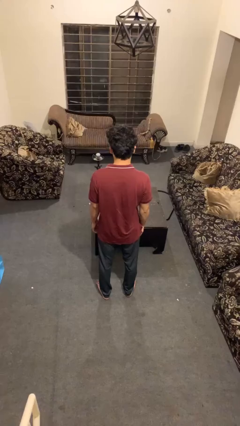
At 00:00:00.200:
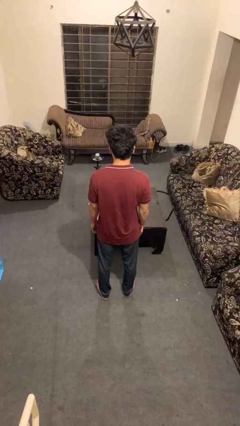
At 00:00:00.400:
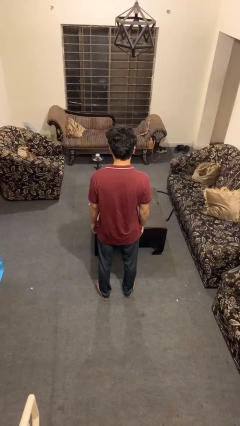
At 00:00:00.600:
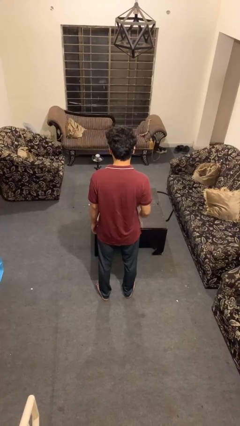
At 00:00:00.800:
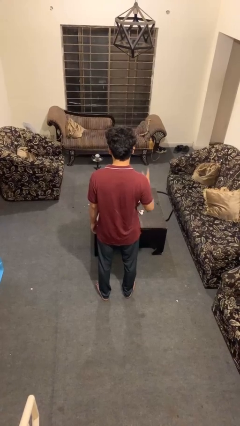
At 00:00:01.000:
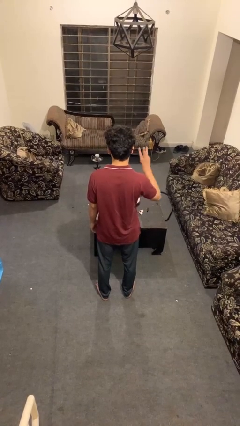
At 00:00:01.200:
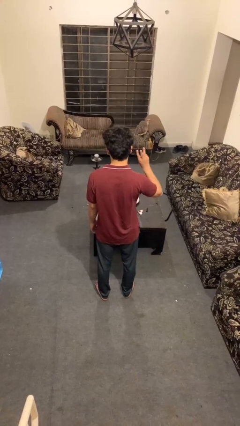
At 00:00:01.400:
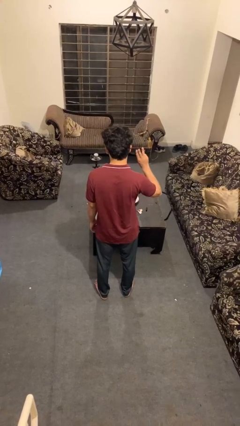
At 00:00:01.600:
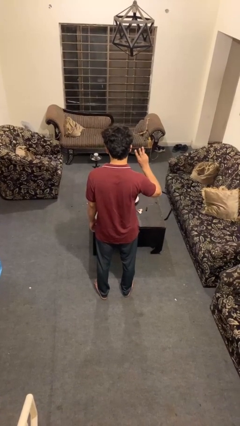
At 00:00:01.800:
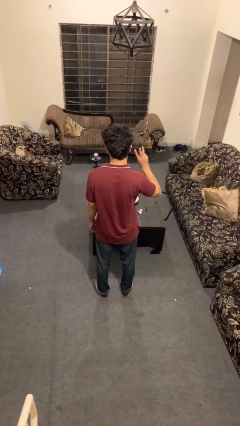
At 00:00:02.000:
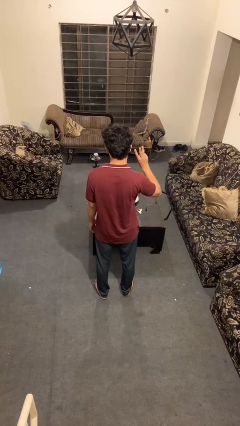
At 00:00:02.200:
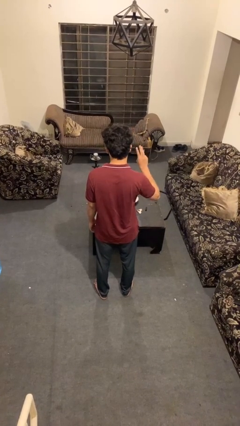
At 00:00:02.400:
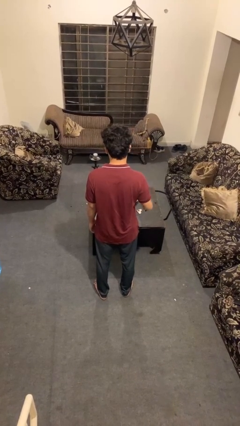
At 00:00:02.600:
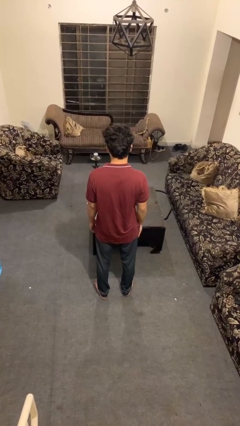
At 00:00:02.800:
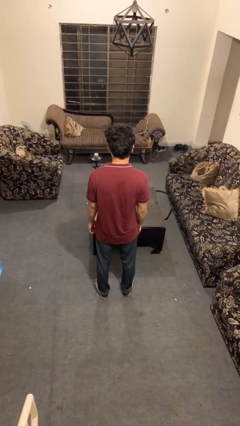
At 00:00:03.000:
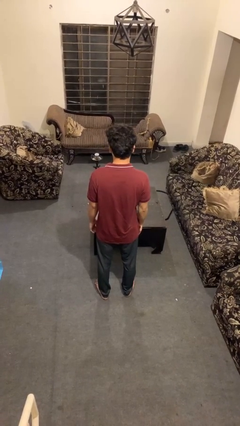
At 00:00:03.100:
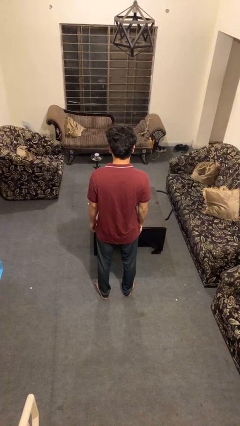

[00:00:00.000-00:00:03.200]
person gestures number three

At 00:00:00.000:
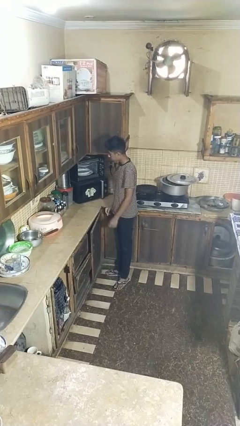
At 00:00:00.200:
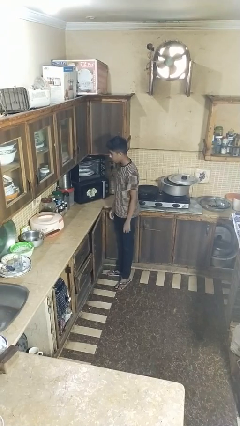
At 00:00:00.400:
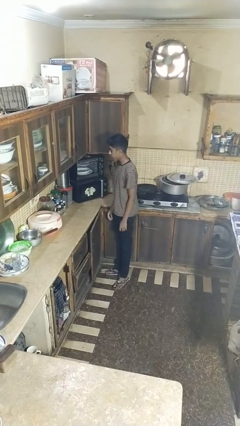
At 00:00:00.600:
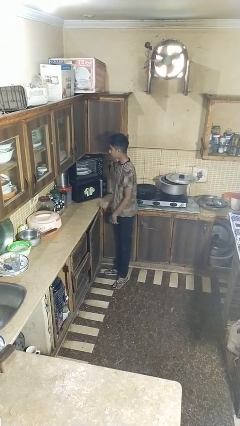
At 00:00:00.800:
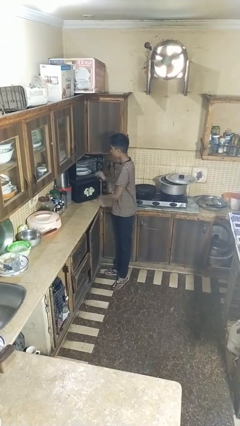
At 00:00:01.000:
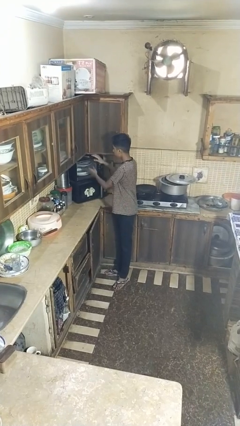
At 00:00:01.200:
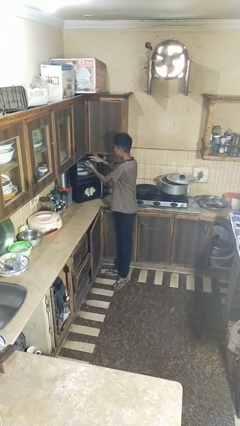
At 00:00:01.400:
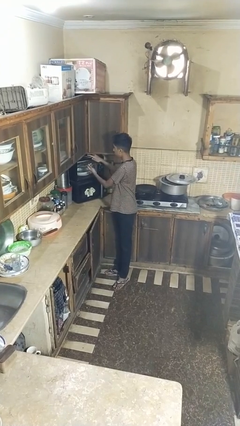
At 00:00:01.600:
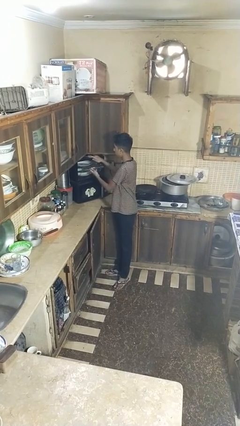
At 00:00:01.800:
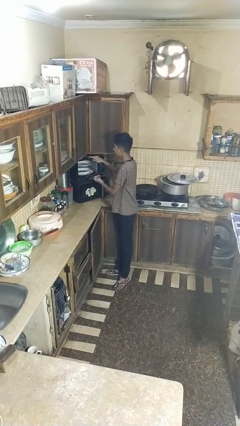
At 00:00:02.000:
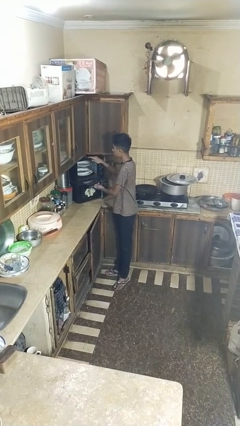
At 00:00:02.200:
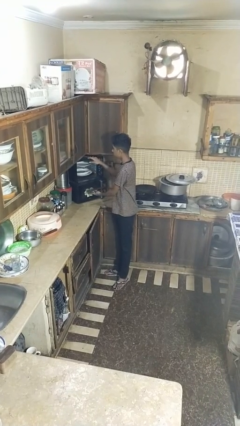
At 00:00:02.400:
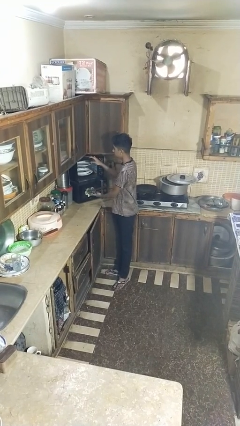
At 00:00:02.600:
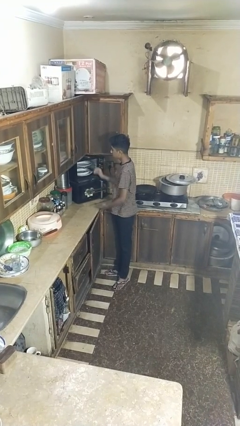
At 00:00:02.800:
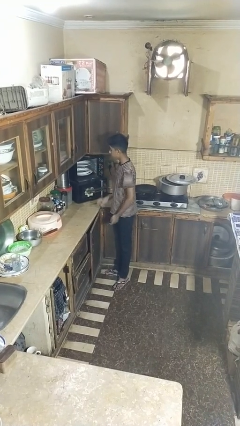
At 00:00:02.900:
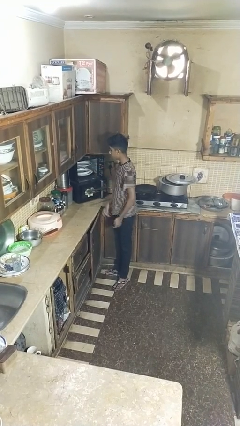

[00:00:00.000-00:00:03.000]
person opens dishwasher

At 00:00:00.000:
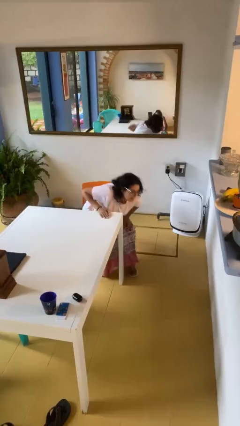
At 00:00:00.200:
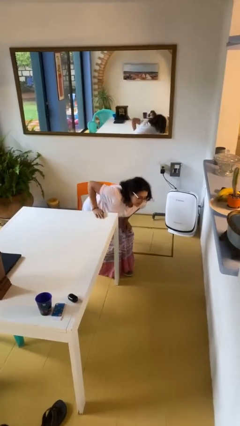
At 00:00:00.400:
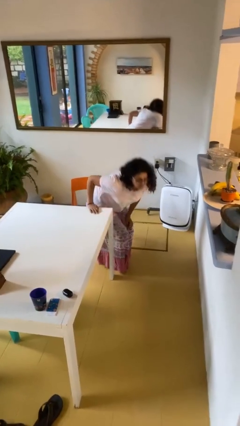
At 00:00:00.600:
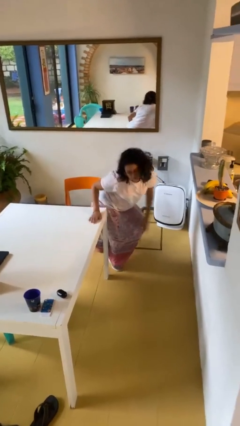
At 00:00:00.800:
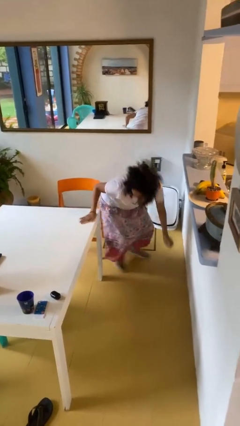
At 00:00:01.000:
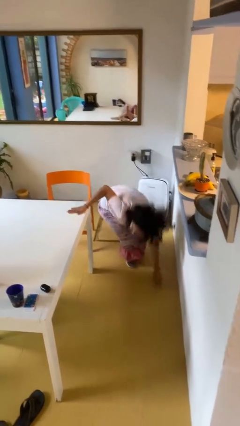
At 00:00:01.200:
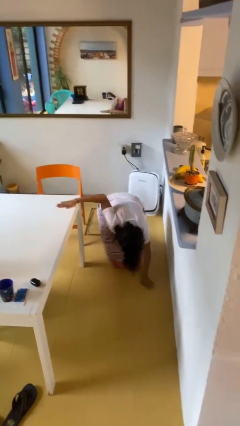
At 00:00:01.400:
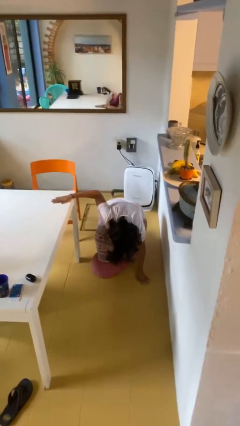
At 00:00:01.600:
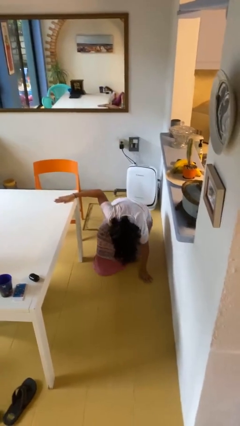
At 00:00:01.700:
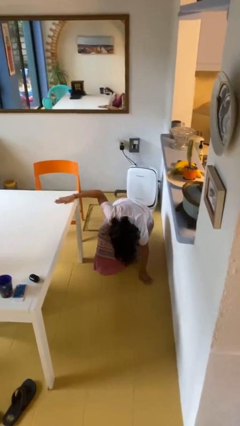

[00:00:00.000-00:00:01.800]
person falls from chair

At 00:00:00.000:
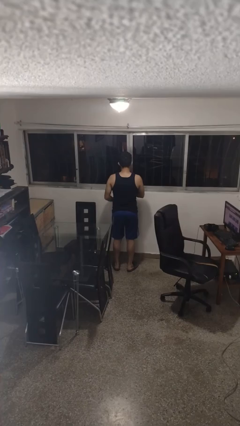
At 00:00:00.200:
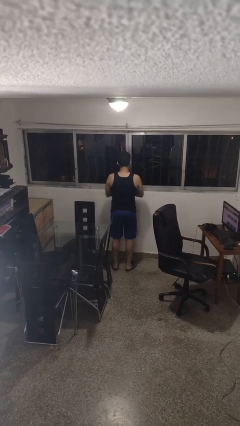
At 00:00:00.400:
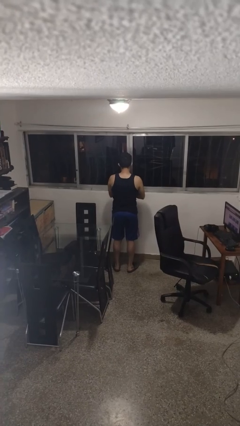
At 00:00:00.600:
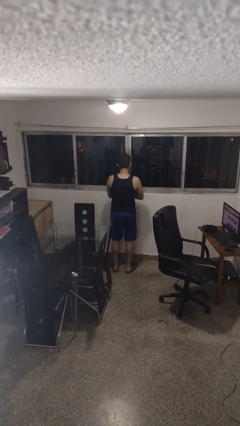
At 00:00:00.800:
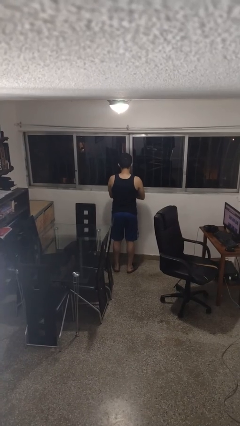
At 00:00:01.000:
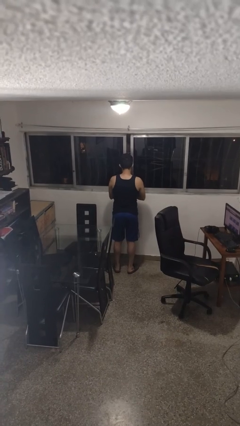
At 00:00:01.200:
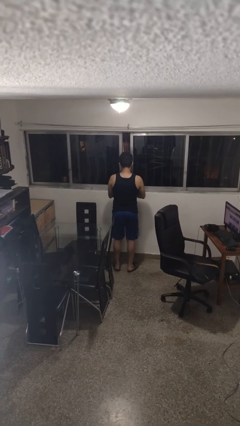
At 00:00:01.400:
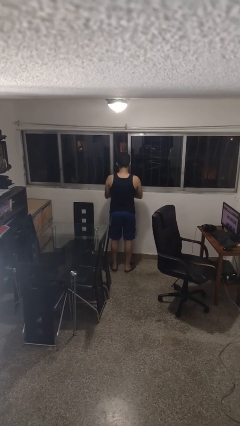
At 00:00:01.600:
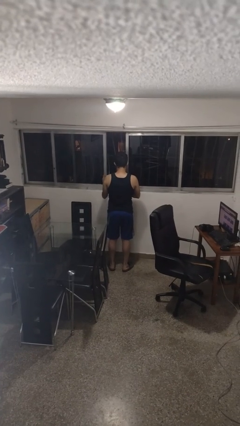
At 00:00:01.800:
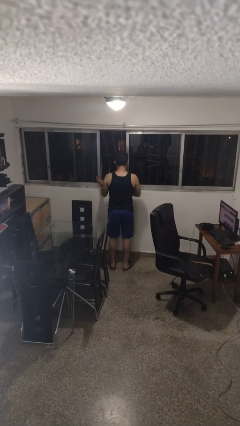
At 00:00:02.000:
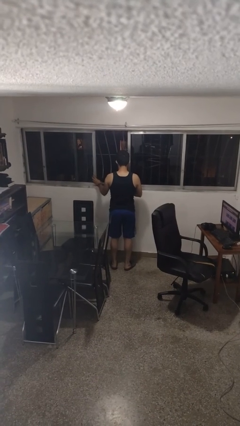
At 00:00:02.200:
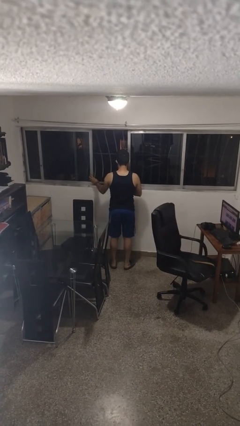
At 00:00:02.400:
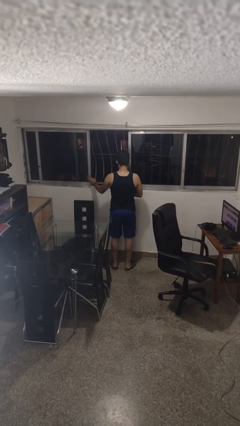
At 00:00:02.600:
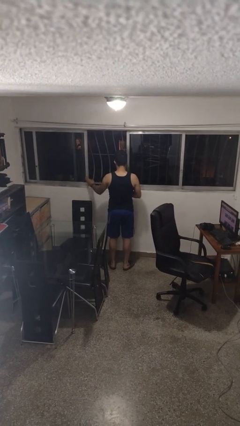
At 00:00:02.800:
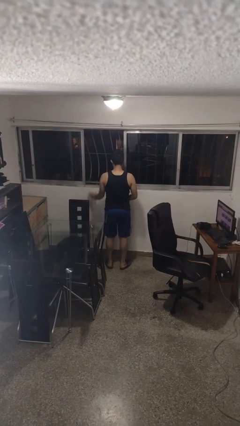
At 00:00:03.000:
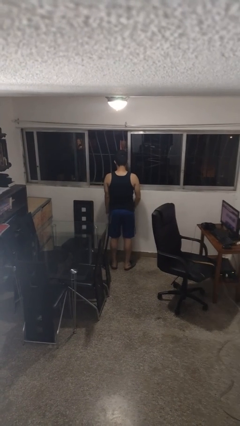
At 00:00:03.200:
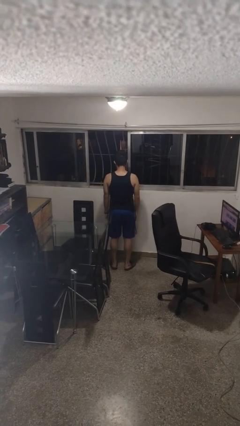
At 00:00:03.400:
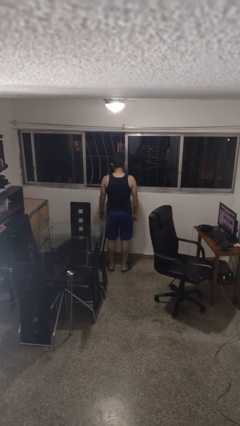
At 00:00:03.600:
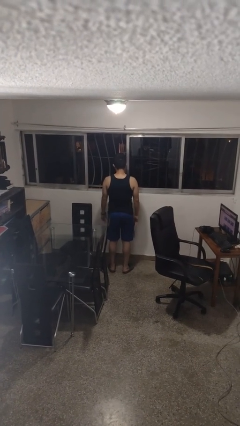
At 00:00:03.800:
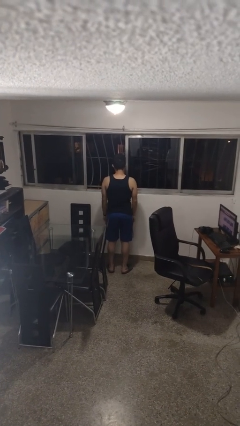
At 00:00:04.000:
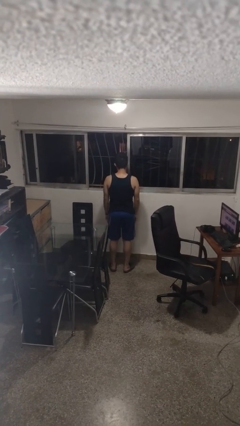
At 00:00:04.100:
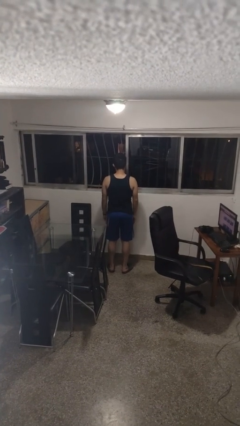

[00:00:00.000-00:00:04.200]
person opens home window

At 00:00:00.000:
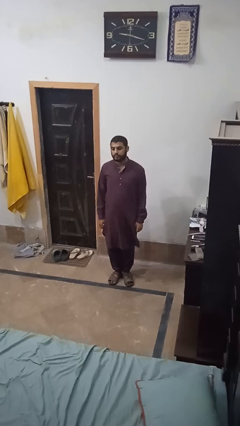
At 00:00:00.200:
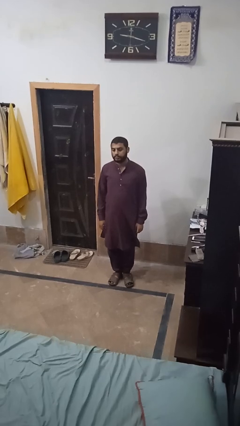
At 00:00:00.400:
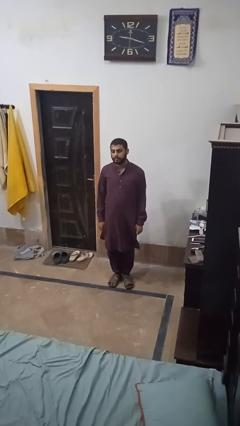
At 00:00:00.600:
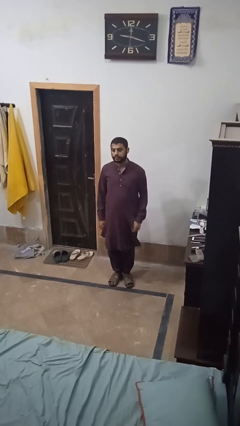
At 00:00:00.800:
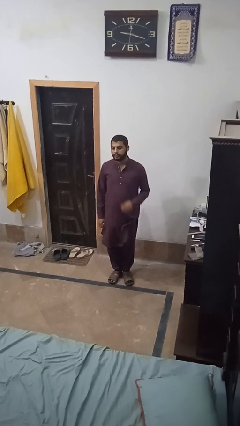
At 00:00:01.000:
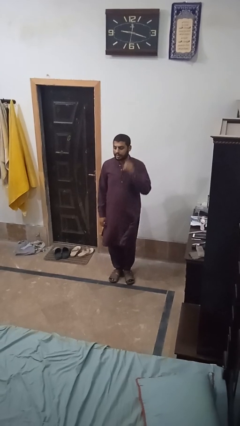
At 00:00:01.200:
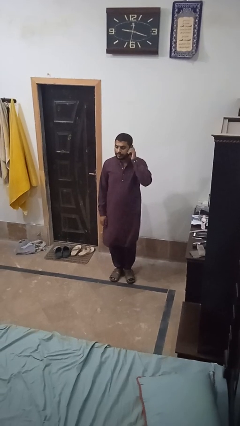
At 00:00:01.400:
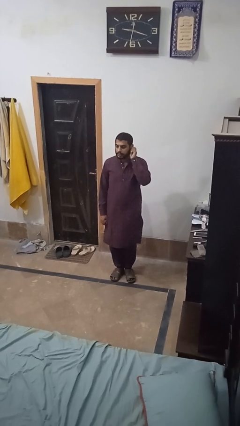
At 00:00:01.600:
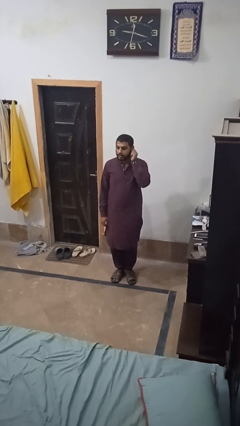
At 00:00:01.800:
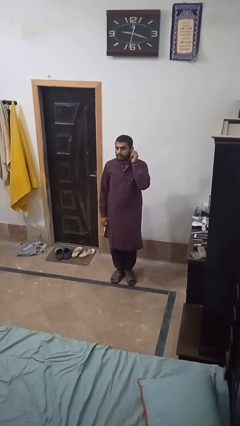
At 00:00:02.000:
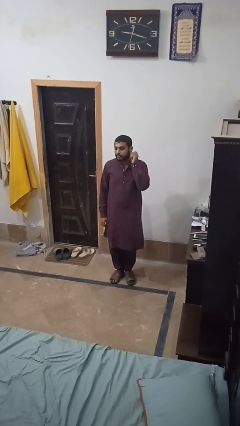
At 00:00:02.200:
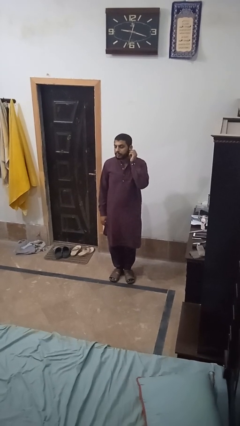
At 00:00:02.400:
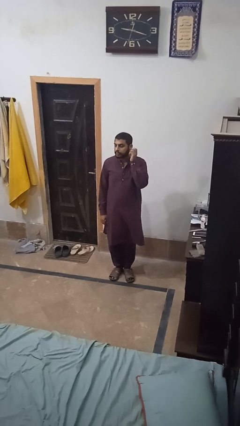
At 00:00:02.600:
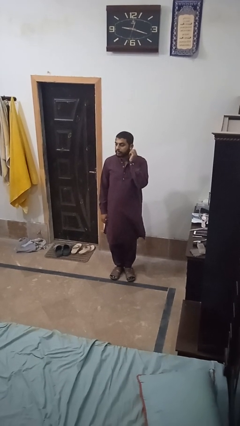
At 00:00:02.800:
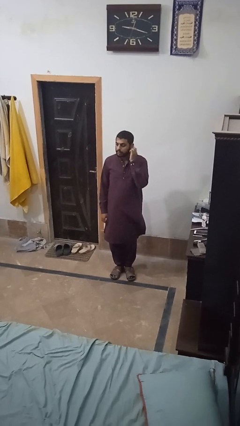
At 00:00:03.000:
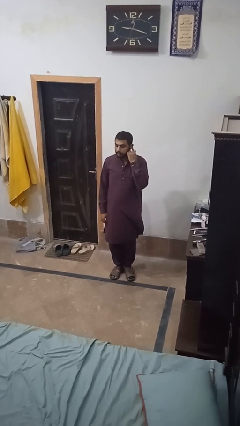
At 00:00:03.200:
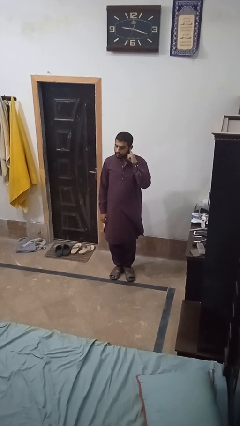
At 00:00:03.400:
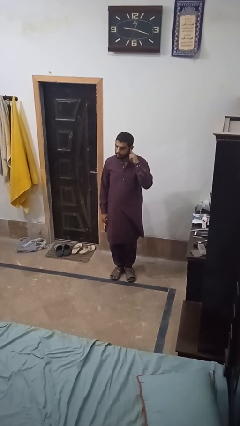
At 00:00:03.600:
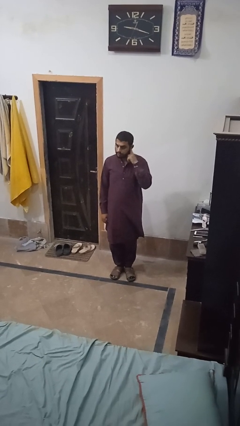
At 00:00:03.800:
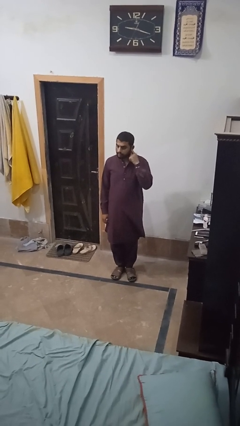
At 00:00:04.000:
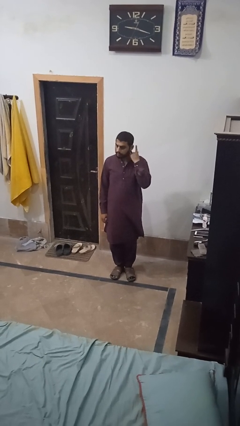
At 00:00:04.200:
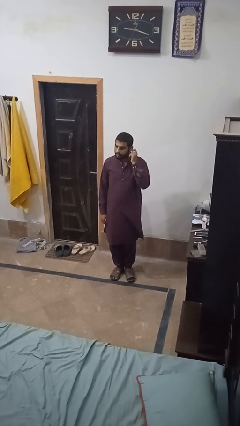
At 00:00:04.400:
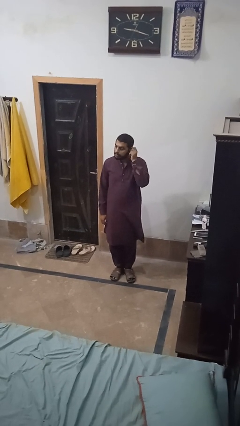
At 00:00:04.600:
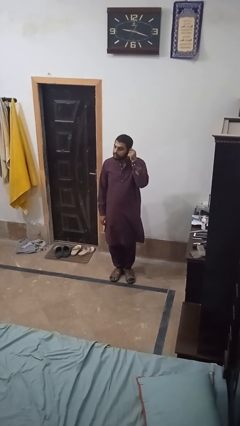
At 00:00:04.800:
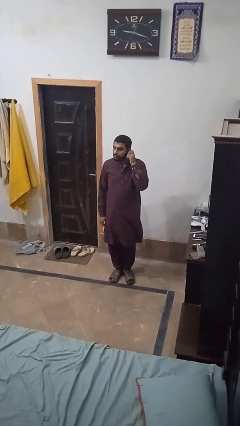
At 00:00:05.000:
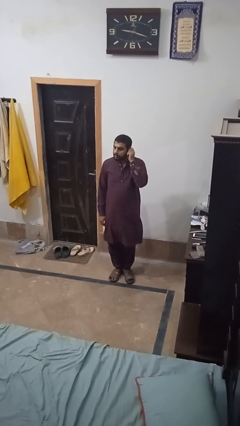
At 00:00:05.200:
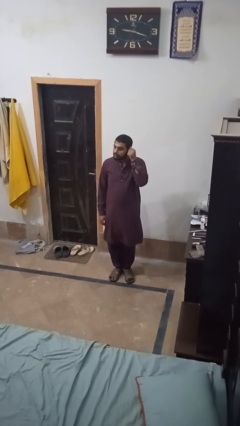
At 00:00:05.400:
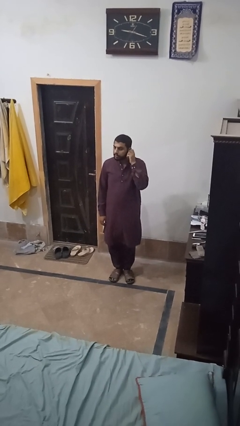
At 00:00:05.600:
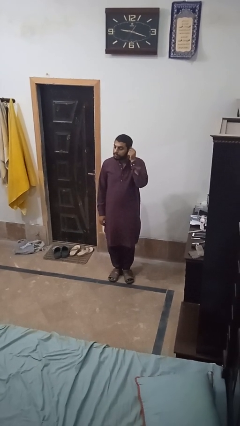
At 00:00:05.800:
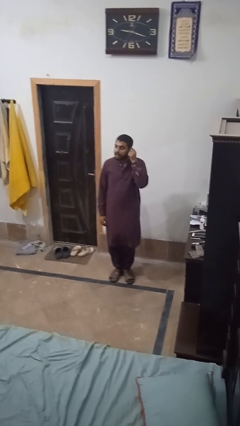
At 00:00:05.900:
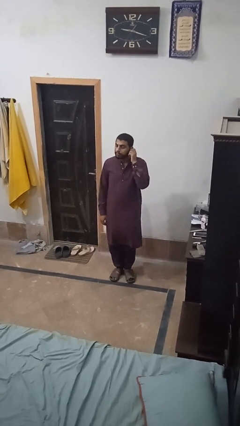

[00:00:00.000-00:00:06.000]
person touches earlobe
